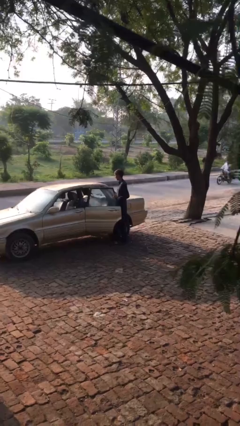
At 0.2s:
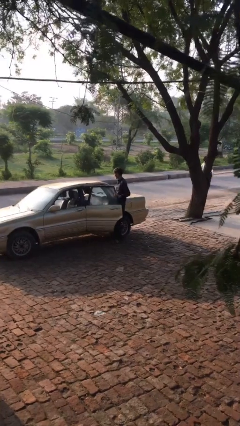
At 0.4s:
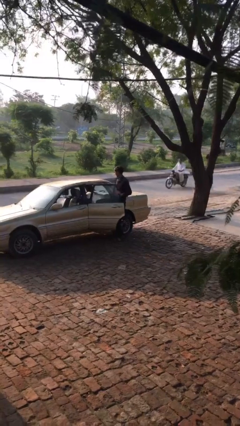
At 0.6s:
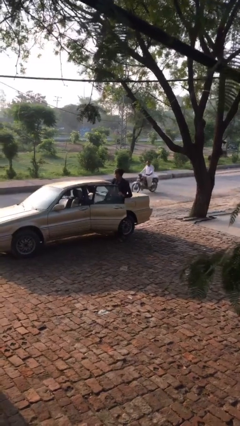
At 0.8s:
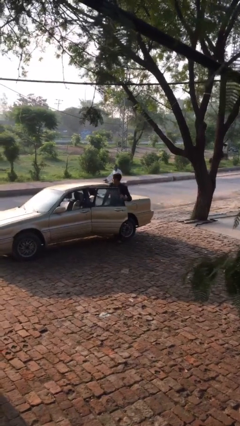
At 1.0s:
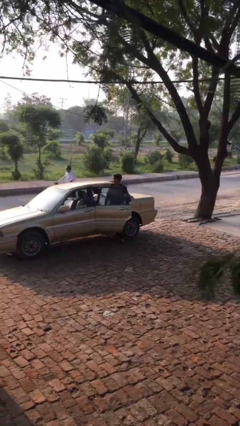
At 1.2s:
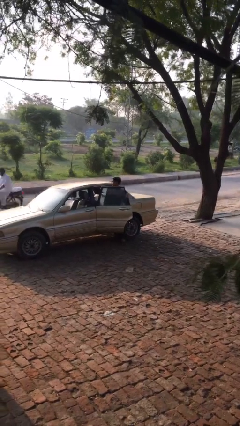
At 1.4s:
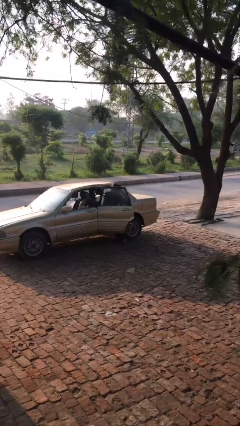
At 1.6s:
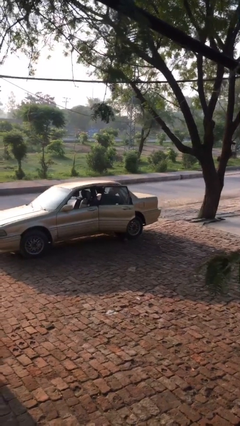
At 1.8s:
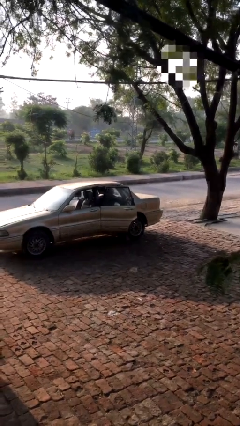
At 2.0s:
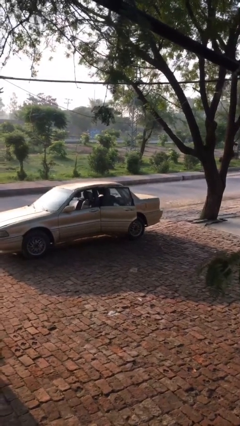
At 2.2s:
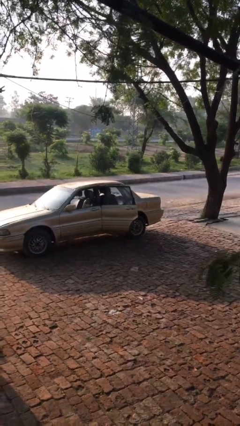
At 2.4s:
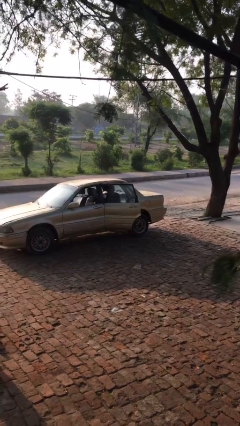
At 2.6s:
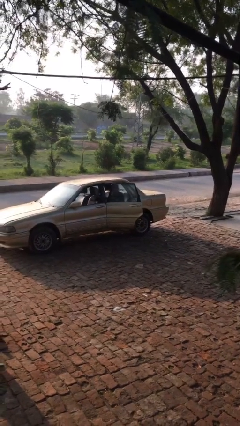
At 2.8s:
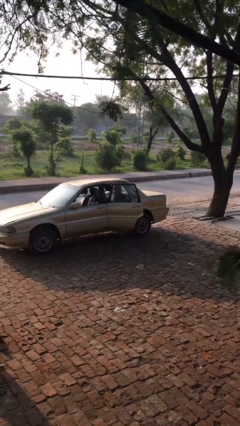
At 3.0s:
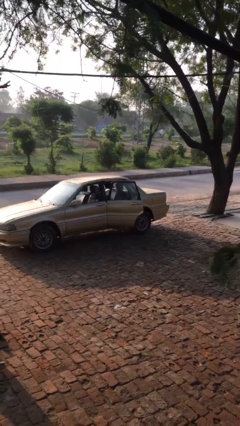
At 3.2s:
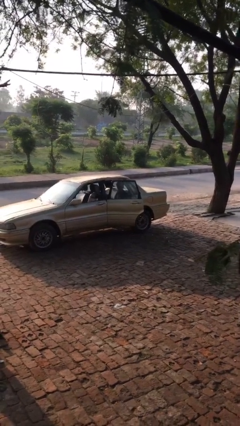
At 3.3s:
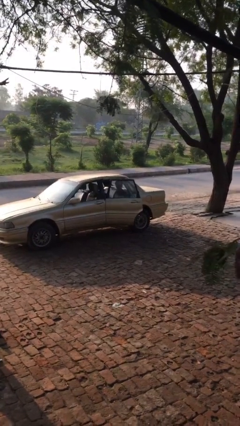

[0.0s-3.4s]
person enters car

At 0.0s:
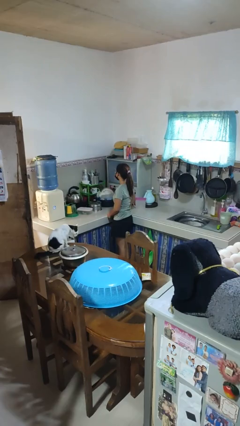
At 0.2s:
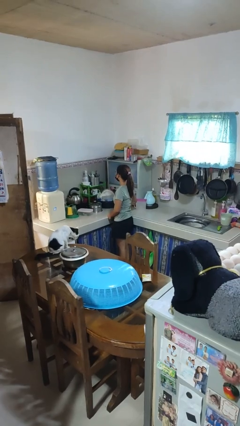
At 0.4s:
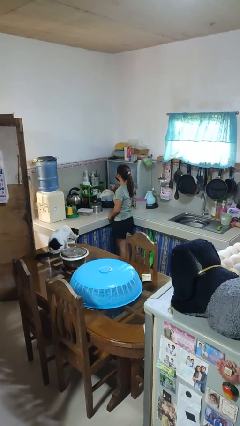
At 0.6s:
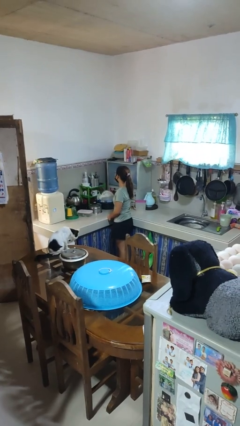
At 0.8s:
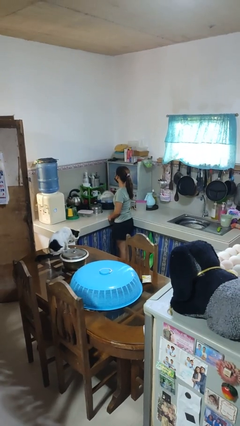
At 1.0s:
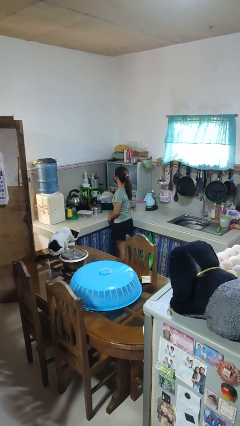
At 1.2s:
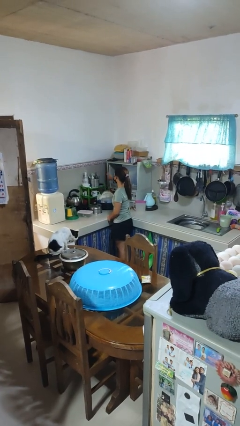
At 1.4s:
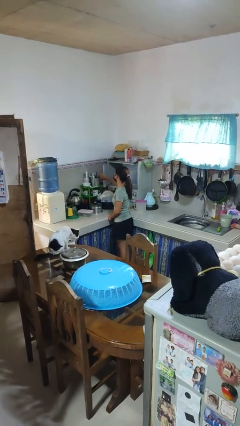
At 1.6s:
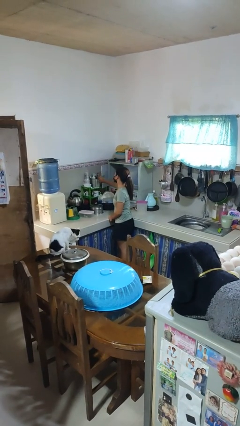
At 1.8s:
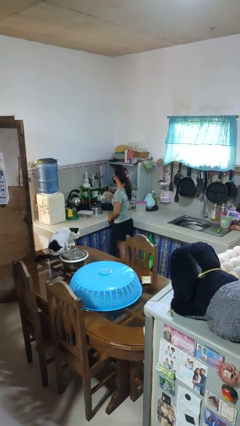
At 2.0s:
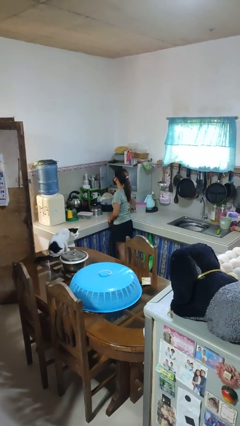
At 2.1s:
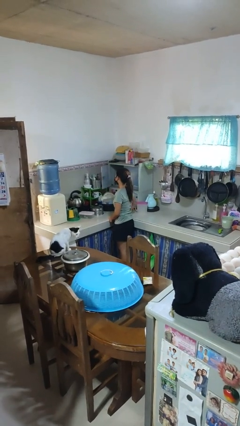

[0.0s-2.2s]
person opens kitchen drawer

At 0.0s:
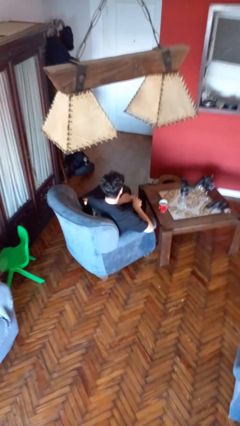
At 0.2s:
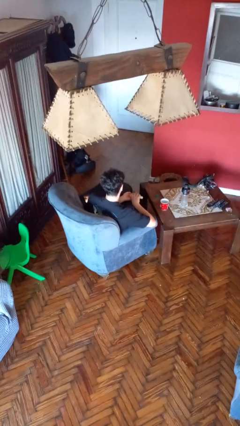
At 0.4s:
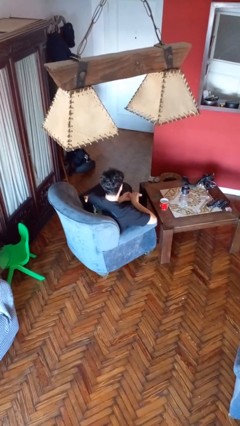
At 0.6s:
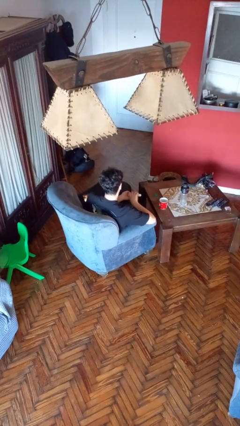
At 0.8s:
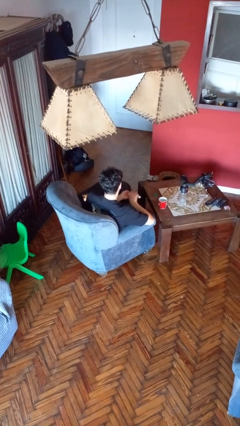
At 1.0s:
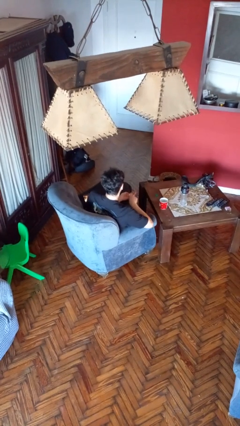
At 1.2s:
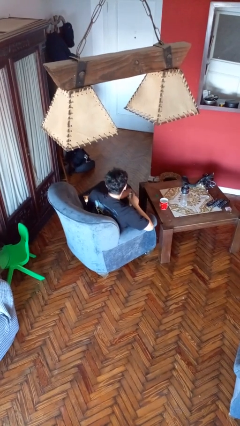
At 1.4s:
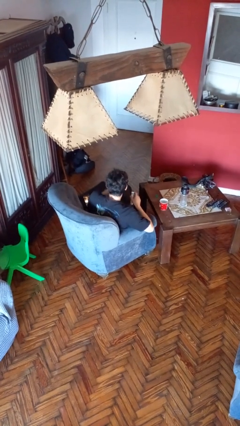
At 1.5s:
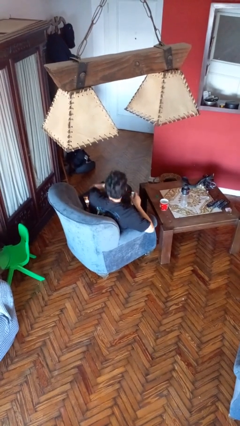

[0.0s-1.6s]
person takes medicine pills

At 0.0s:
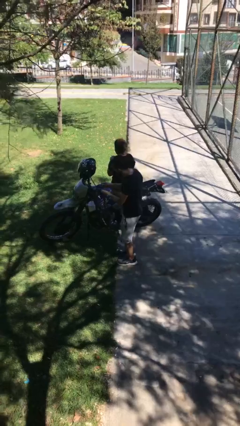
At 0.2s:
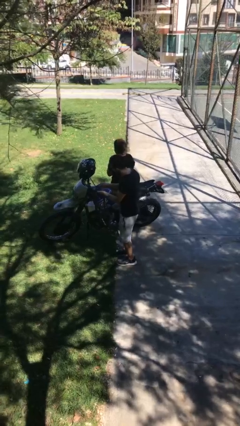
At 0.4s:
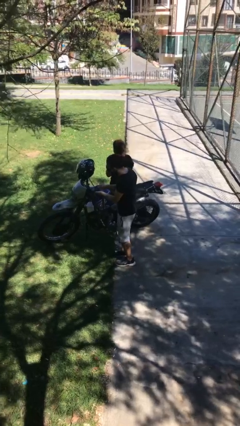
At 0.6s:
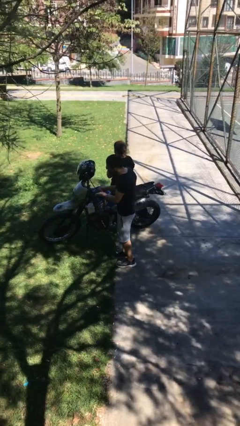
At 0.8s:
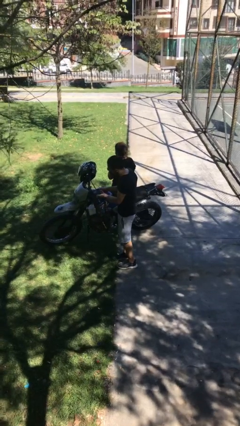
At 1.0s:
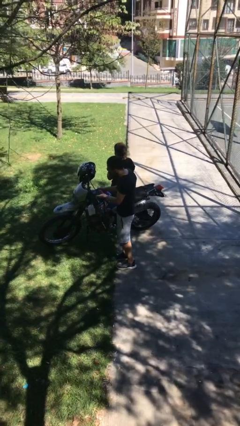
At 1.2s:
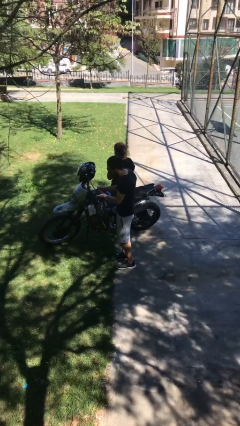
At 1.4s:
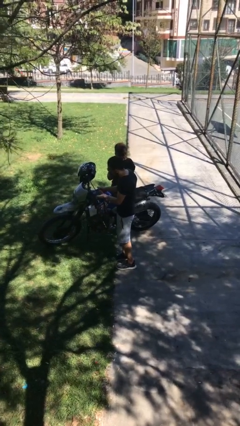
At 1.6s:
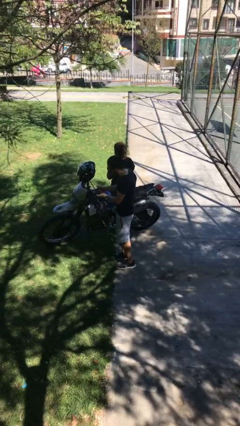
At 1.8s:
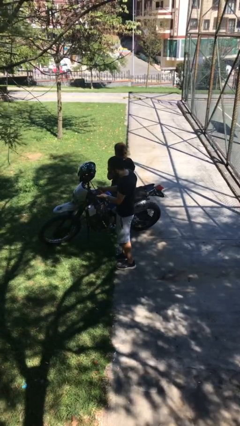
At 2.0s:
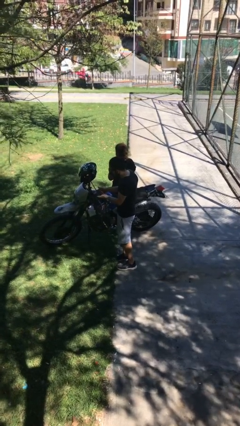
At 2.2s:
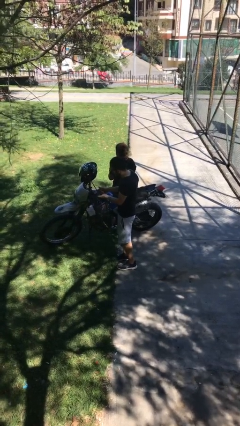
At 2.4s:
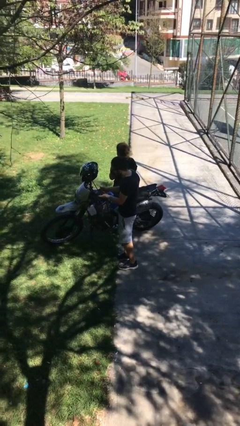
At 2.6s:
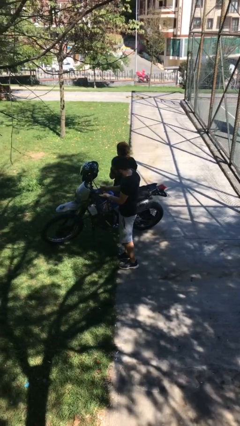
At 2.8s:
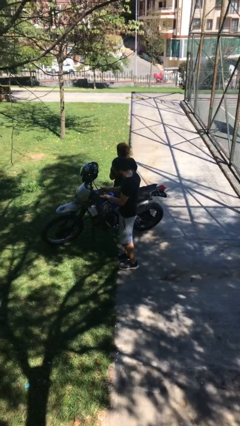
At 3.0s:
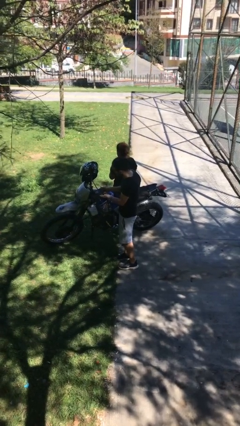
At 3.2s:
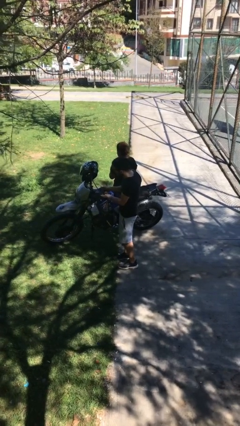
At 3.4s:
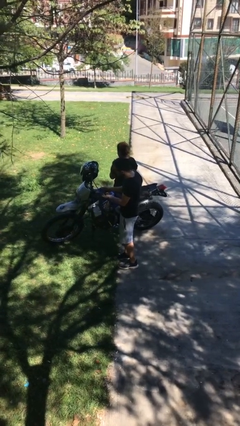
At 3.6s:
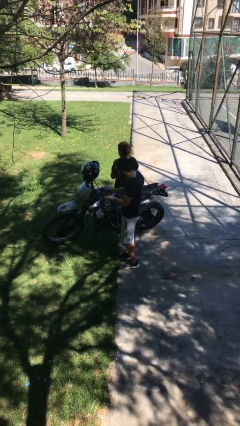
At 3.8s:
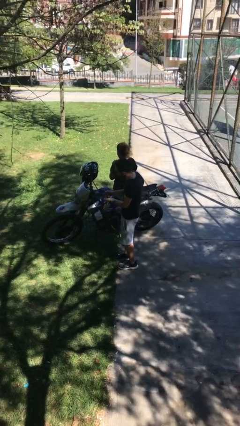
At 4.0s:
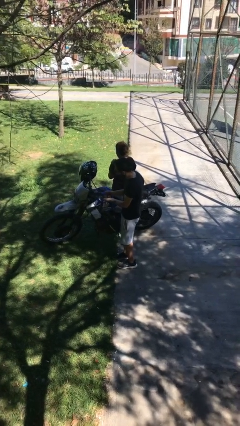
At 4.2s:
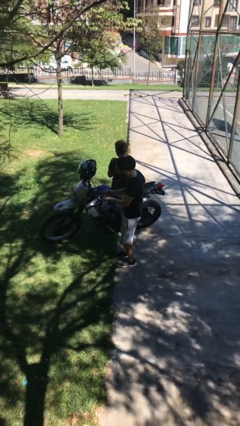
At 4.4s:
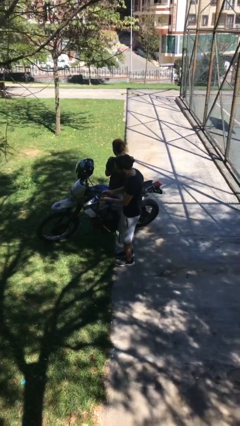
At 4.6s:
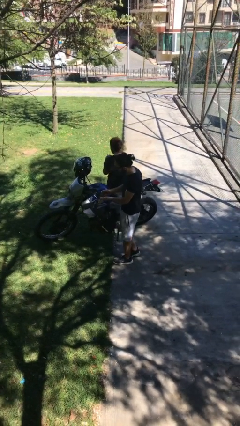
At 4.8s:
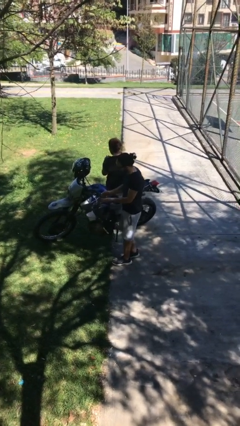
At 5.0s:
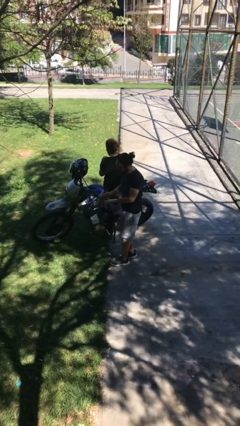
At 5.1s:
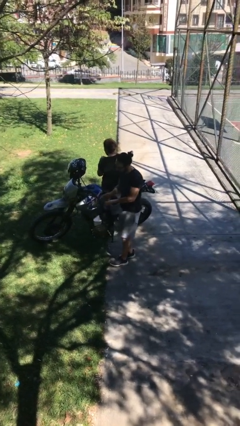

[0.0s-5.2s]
person steals object from person

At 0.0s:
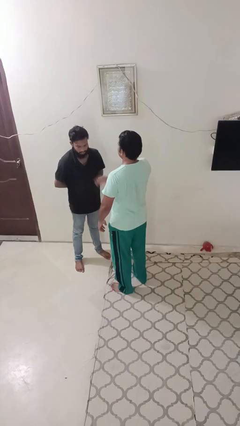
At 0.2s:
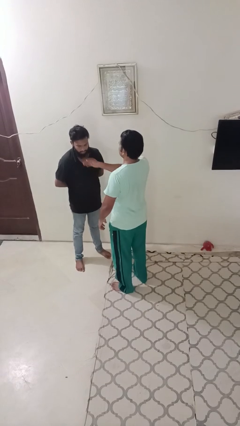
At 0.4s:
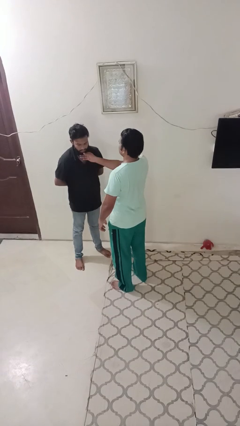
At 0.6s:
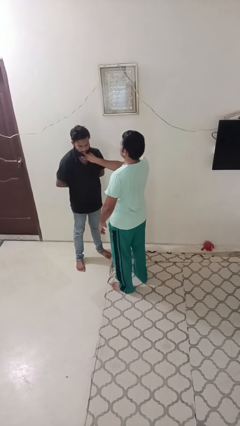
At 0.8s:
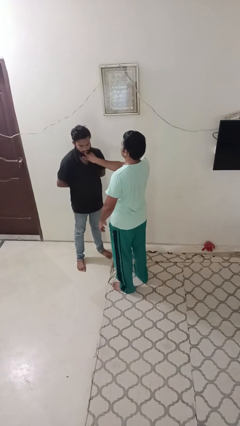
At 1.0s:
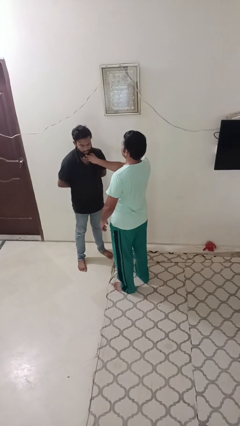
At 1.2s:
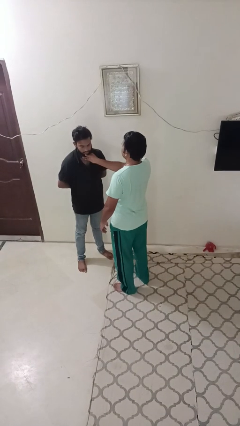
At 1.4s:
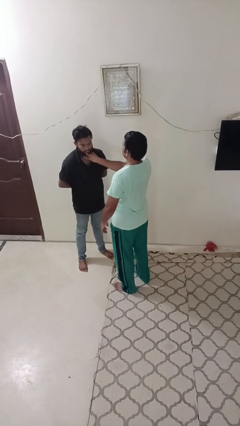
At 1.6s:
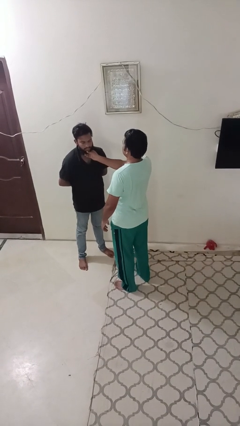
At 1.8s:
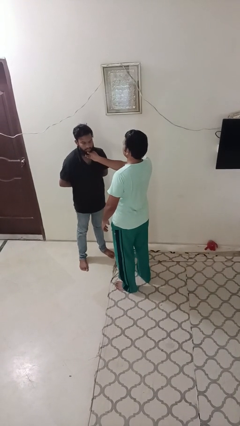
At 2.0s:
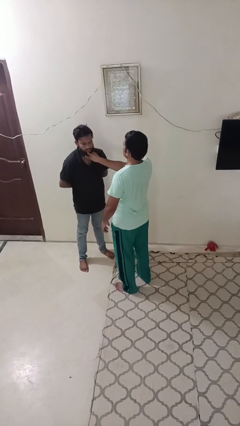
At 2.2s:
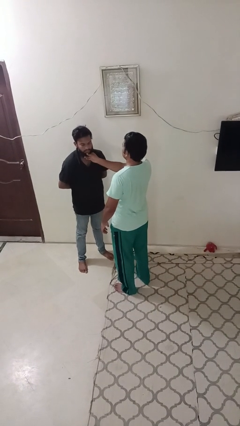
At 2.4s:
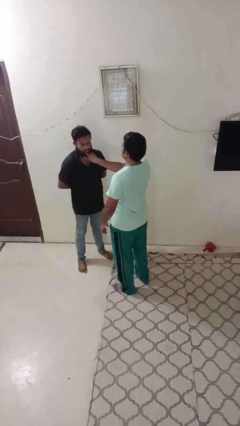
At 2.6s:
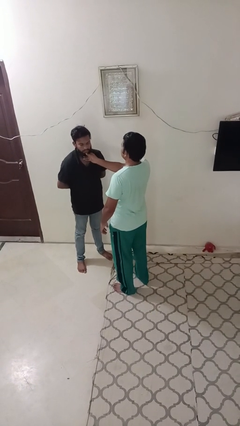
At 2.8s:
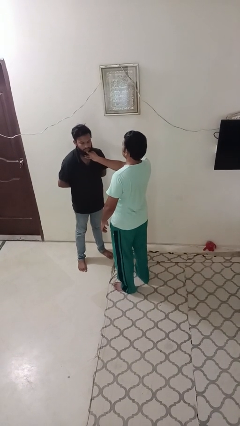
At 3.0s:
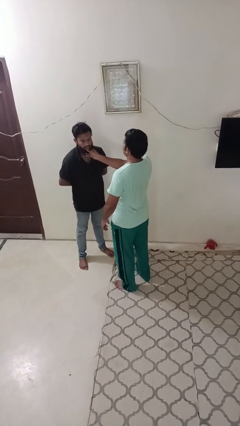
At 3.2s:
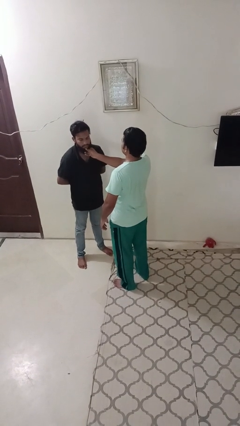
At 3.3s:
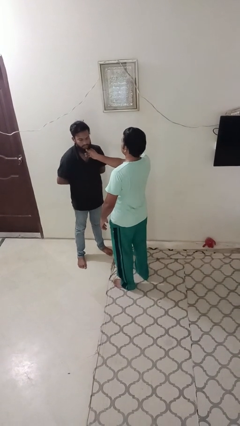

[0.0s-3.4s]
person touches face of person

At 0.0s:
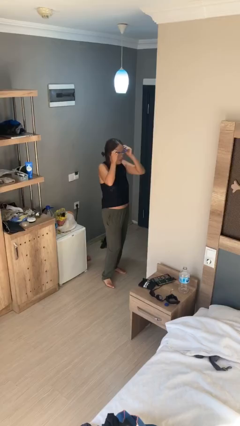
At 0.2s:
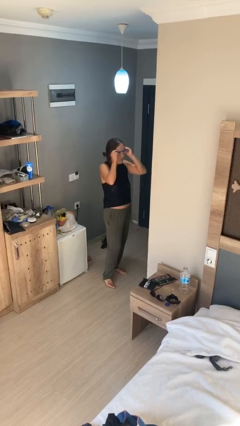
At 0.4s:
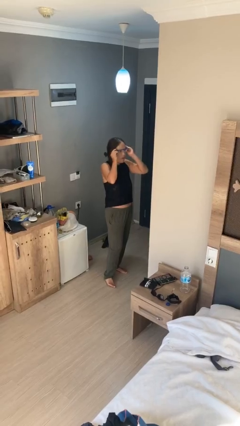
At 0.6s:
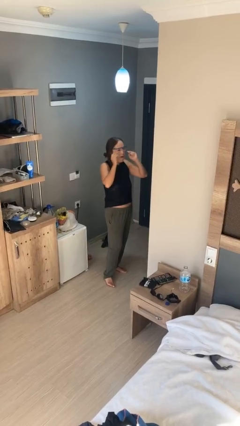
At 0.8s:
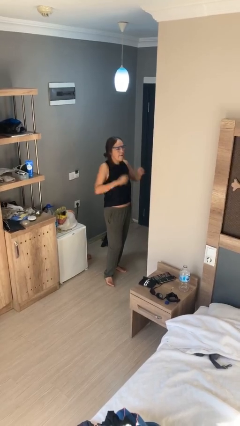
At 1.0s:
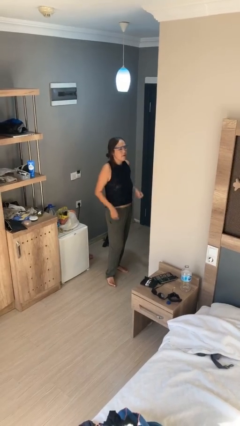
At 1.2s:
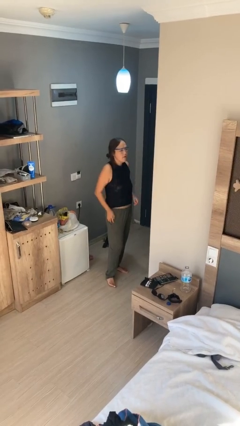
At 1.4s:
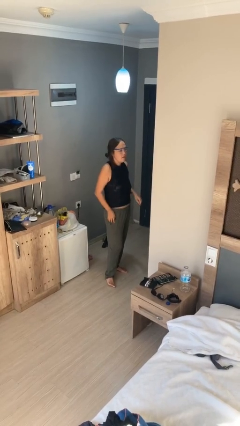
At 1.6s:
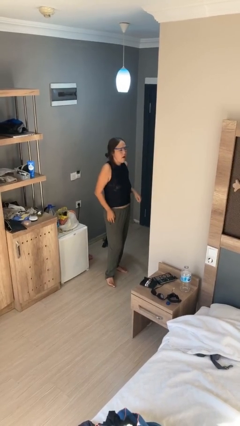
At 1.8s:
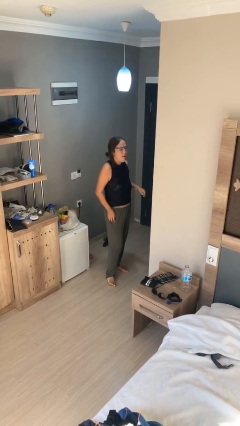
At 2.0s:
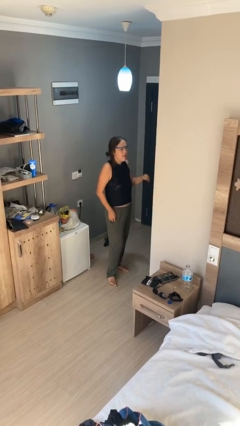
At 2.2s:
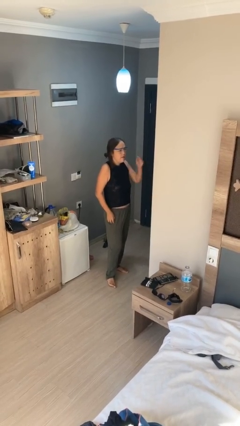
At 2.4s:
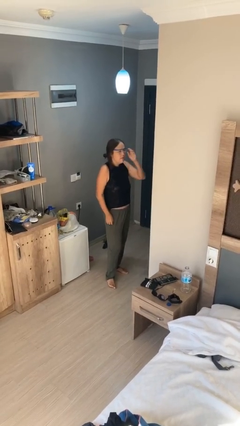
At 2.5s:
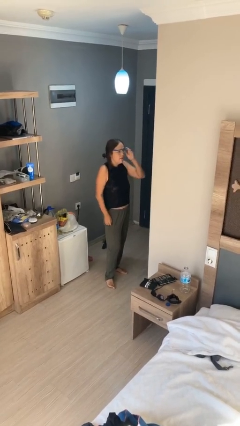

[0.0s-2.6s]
person puts on glasses
